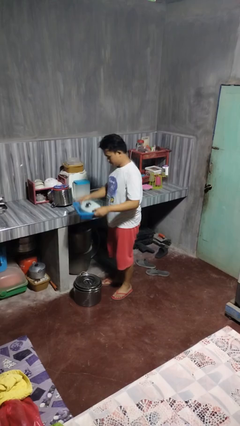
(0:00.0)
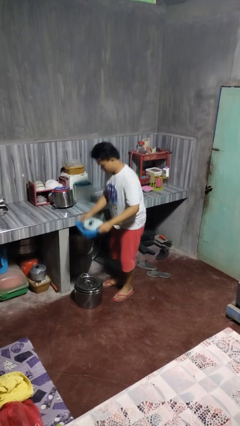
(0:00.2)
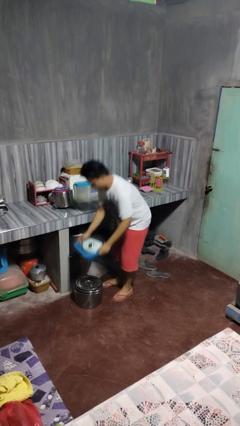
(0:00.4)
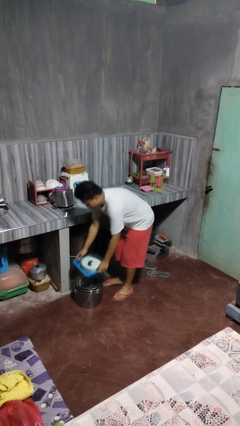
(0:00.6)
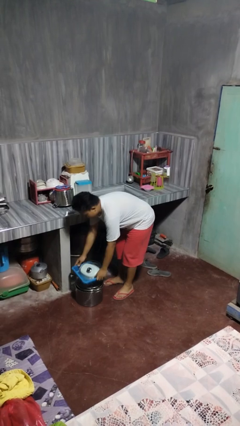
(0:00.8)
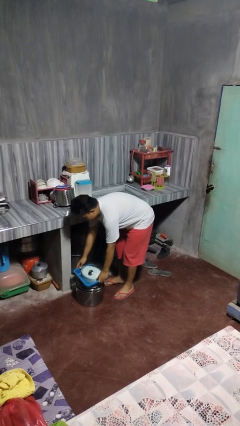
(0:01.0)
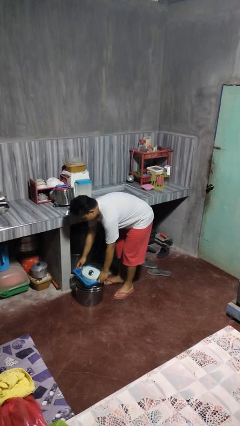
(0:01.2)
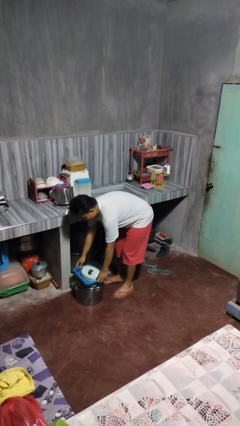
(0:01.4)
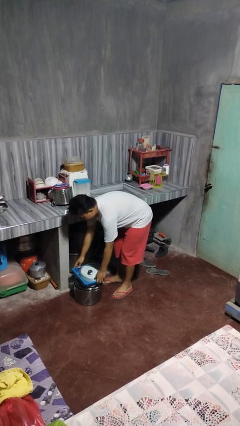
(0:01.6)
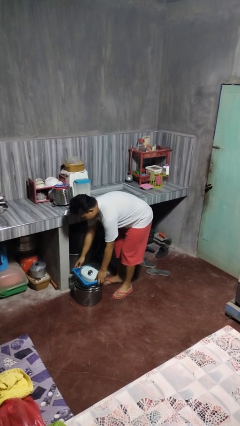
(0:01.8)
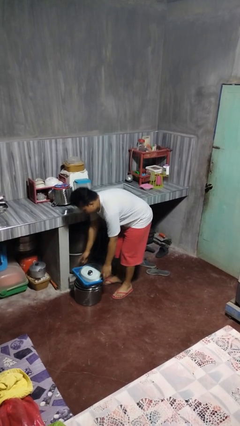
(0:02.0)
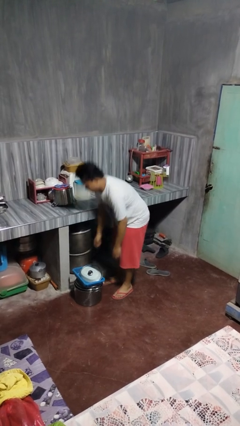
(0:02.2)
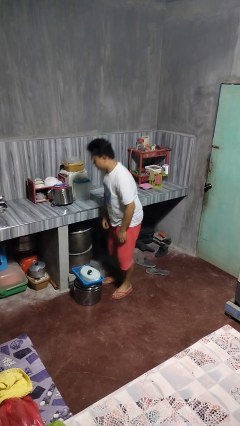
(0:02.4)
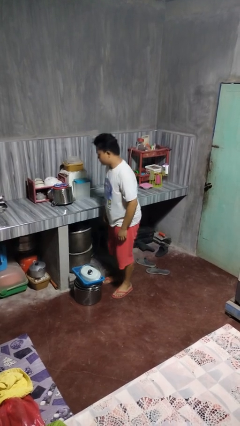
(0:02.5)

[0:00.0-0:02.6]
person puts down object on countertop

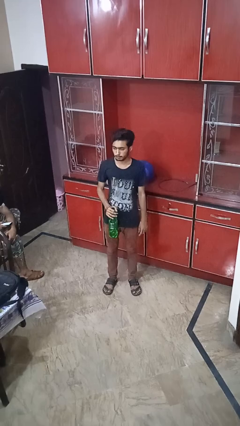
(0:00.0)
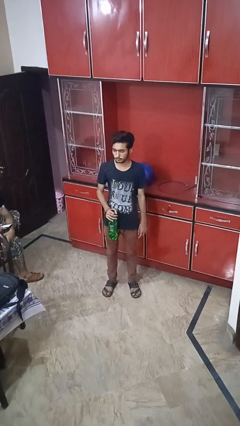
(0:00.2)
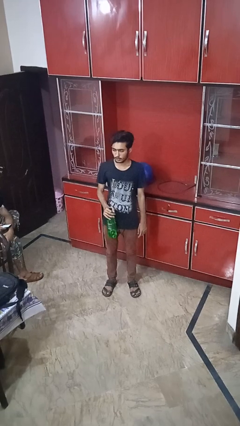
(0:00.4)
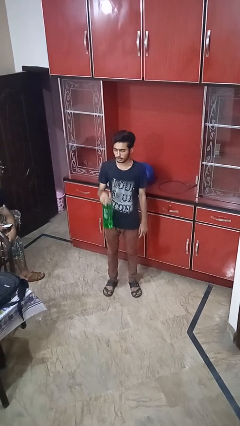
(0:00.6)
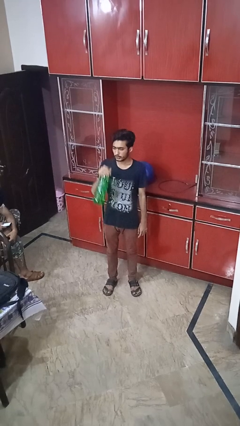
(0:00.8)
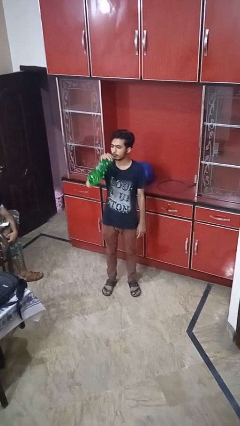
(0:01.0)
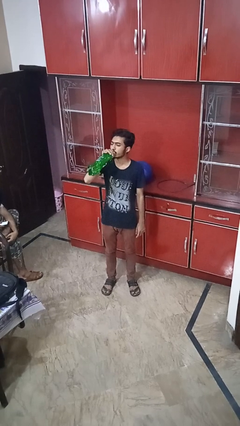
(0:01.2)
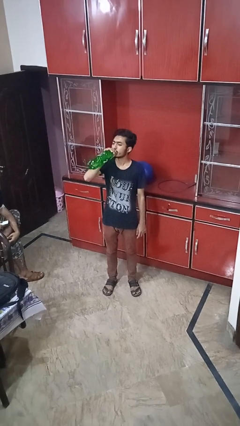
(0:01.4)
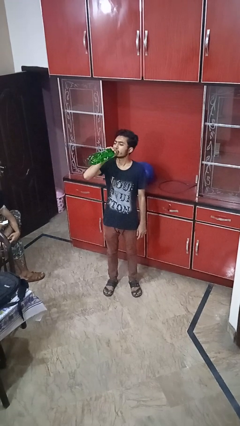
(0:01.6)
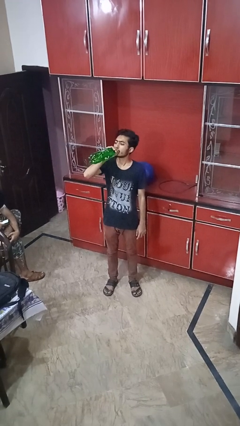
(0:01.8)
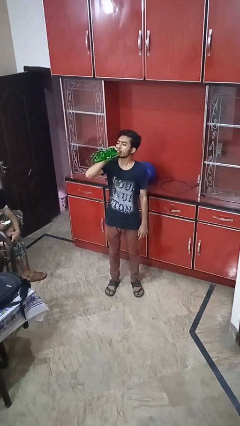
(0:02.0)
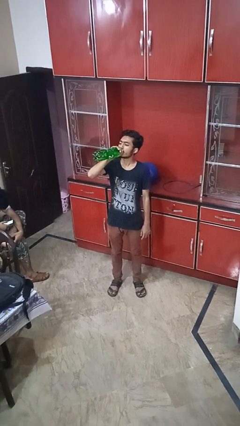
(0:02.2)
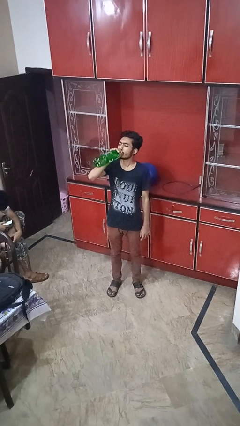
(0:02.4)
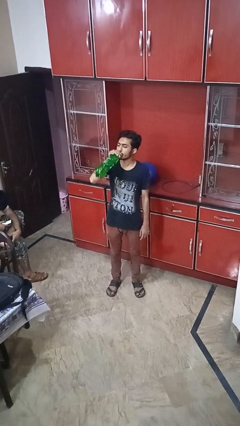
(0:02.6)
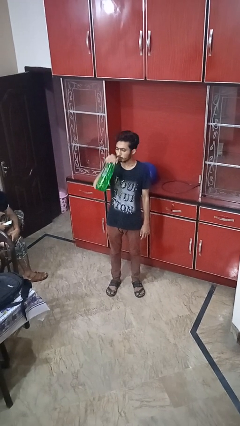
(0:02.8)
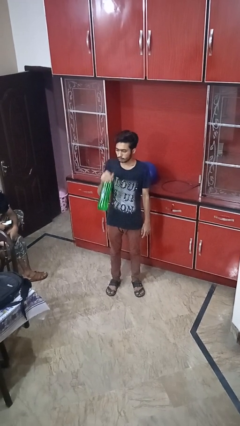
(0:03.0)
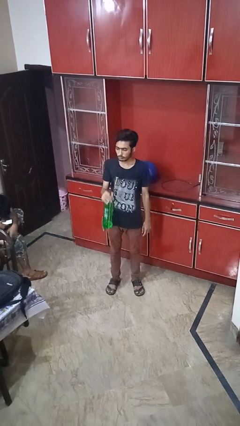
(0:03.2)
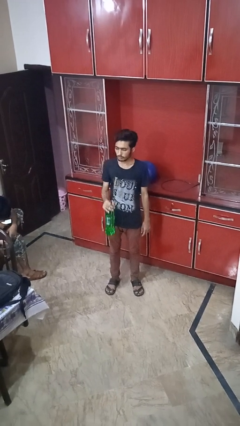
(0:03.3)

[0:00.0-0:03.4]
person drinks from bottle

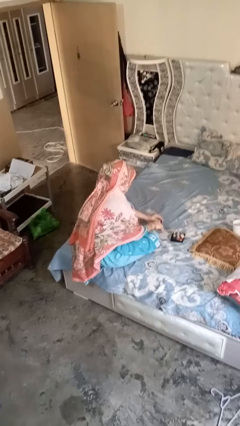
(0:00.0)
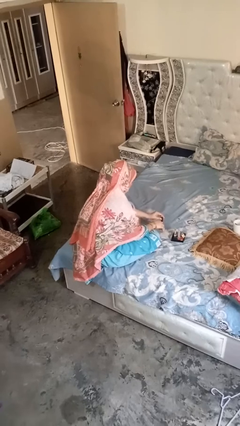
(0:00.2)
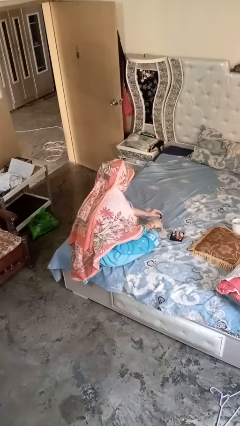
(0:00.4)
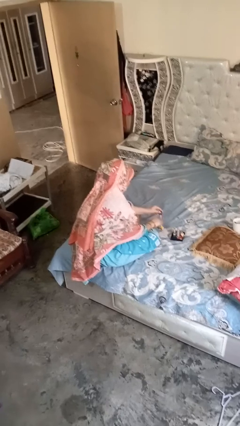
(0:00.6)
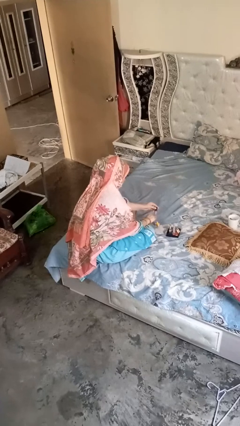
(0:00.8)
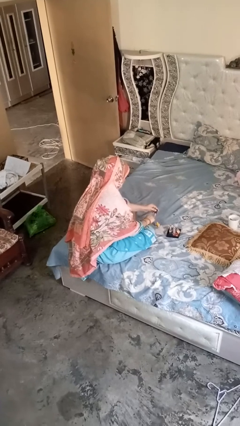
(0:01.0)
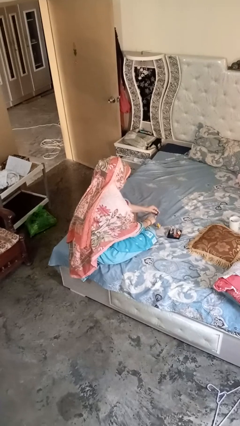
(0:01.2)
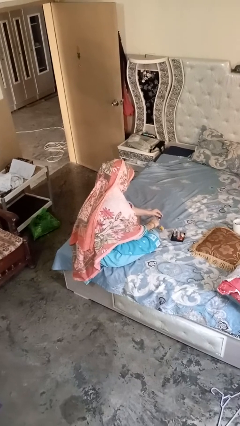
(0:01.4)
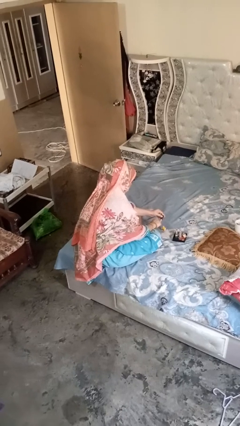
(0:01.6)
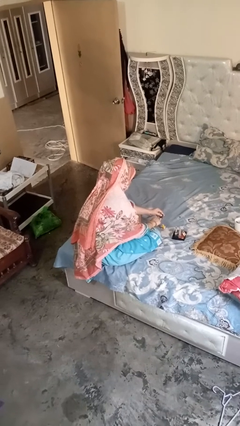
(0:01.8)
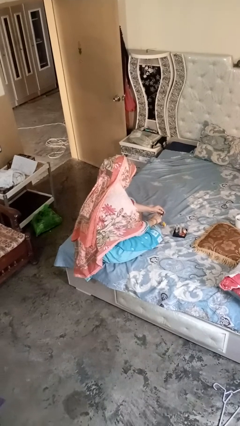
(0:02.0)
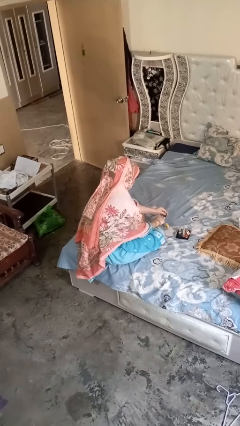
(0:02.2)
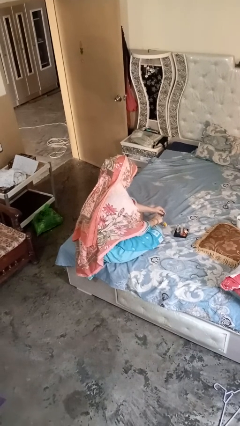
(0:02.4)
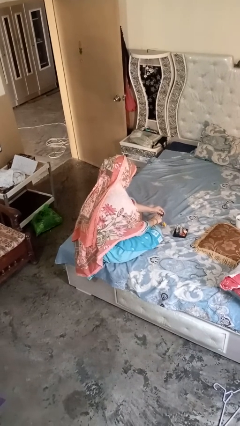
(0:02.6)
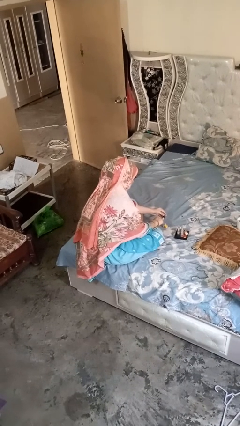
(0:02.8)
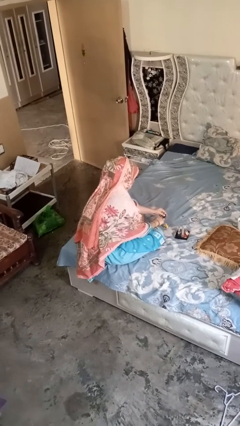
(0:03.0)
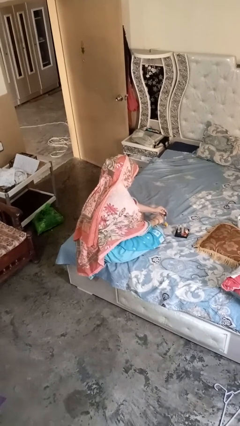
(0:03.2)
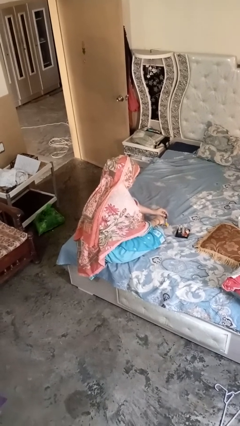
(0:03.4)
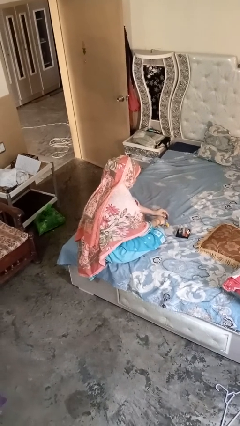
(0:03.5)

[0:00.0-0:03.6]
person paints fingernails

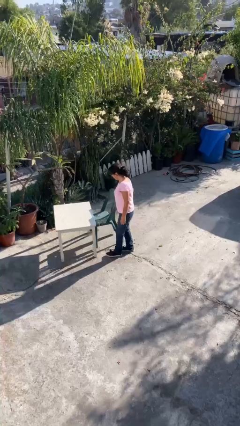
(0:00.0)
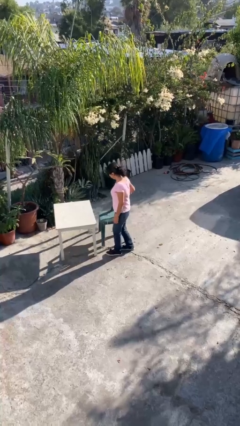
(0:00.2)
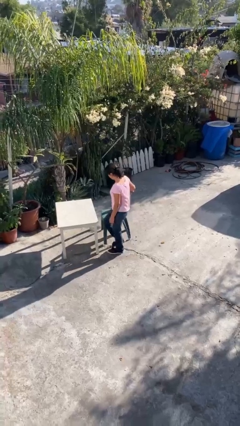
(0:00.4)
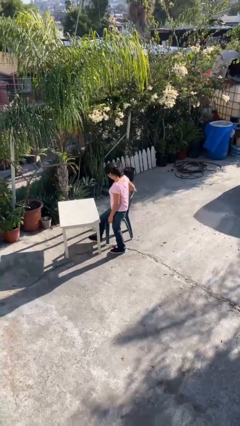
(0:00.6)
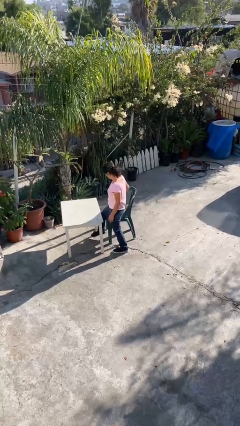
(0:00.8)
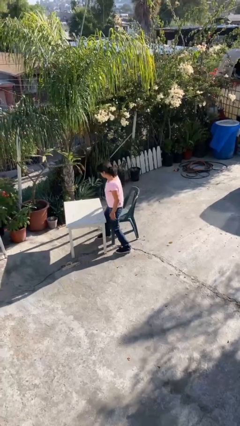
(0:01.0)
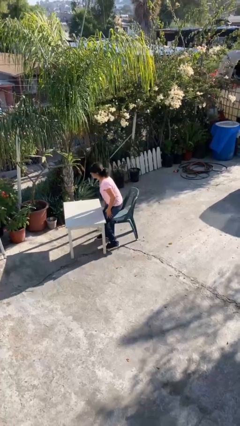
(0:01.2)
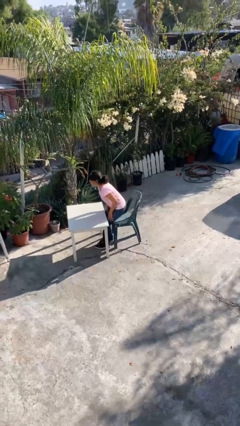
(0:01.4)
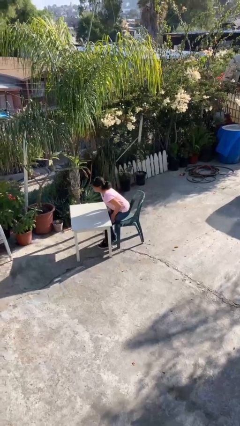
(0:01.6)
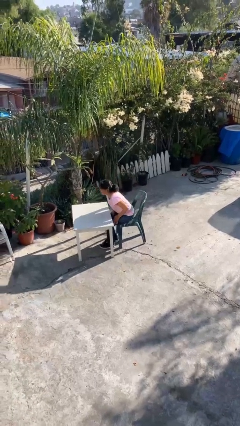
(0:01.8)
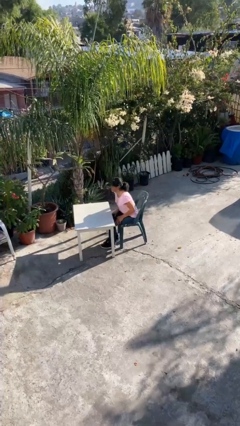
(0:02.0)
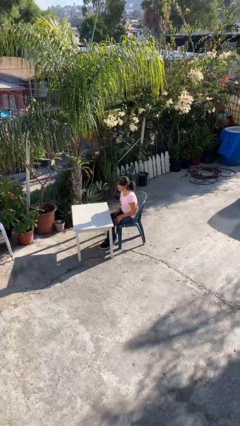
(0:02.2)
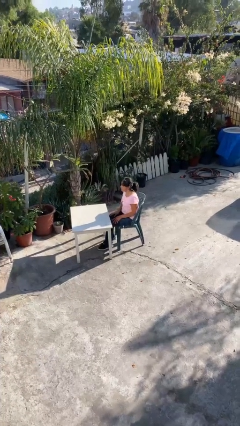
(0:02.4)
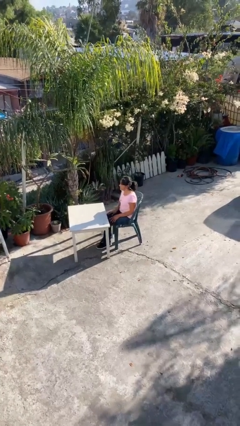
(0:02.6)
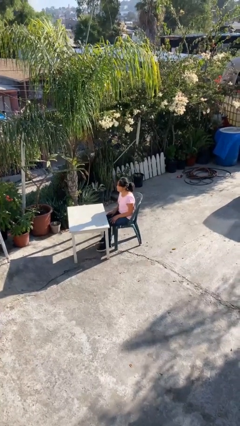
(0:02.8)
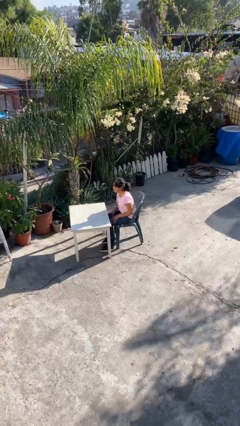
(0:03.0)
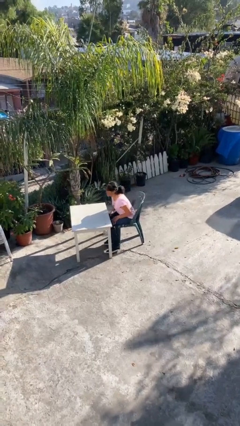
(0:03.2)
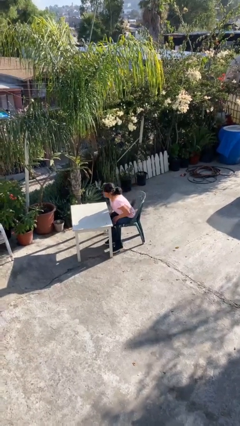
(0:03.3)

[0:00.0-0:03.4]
person sits down

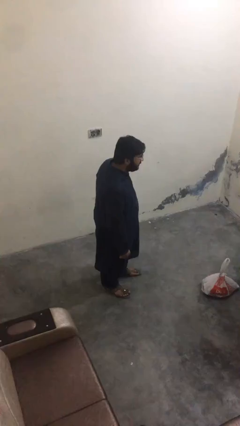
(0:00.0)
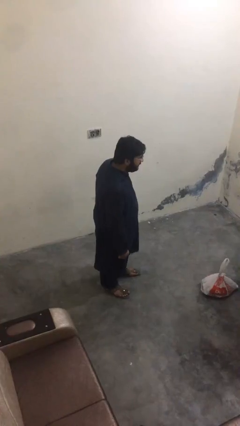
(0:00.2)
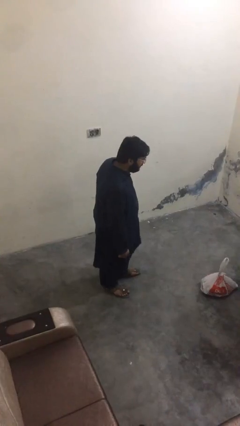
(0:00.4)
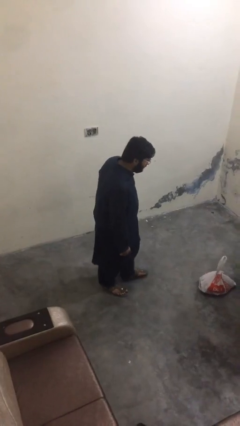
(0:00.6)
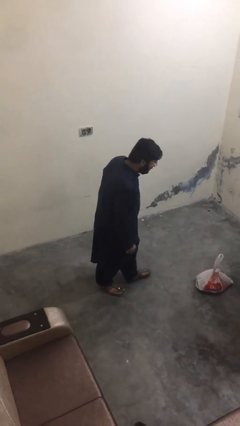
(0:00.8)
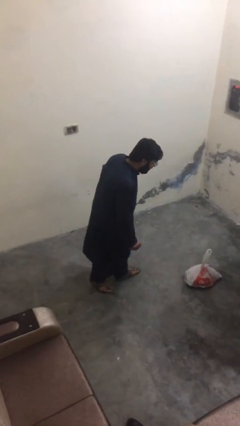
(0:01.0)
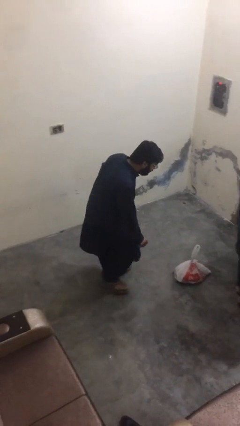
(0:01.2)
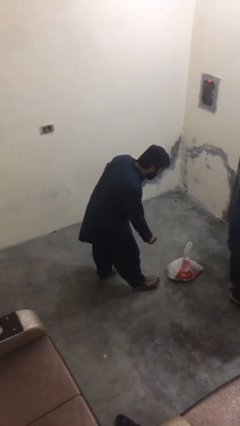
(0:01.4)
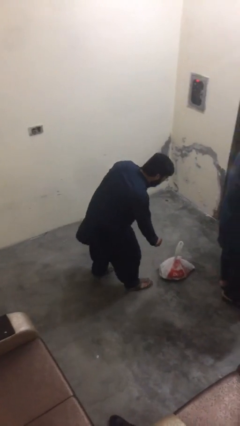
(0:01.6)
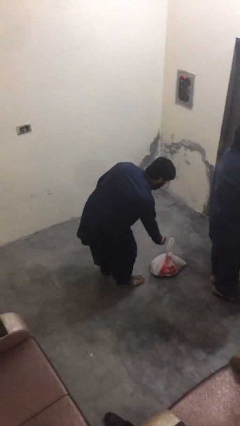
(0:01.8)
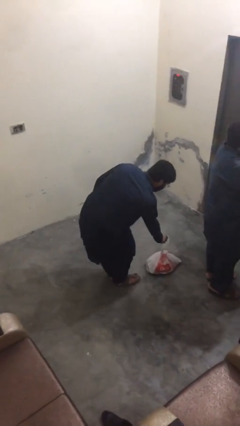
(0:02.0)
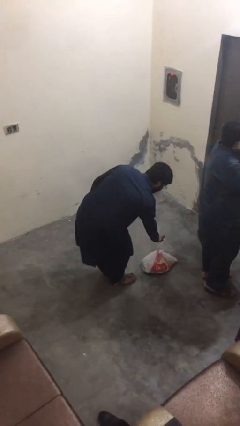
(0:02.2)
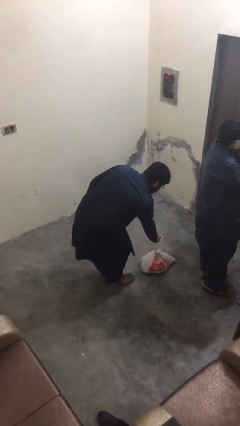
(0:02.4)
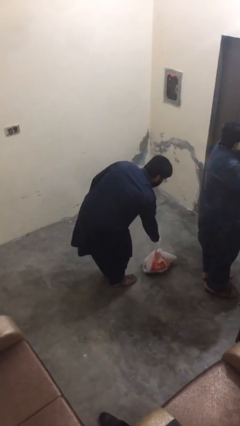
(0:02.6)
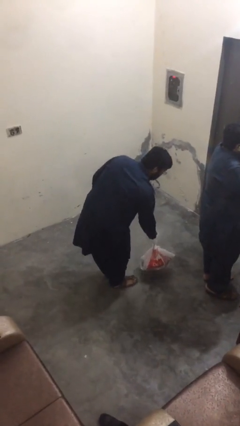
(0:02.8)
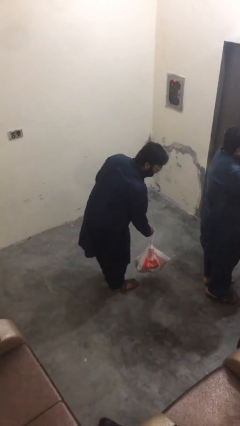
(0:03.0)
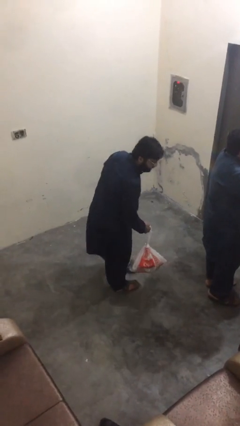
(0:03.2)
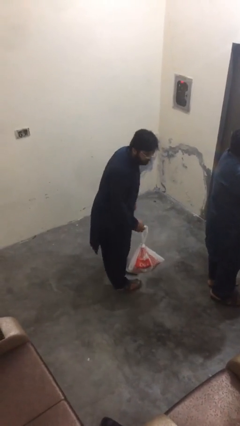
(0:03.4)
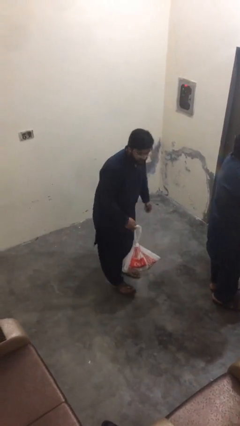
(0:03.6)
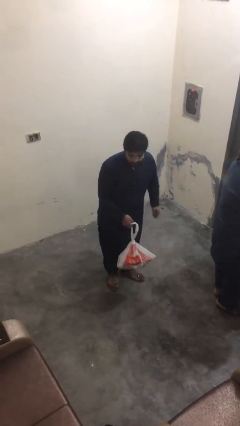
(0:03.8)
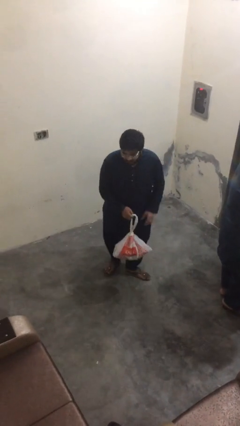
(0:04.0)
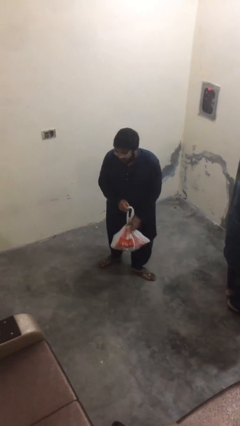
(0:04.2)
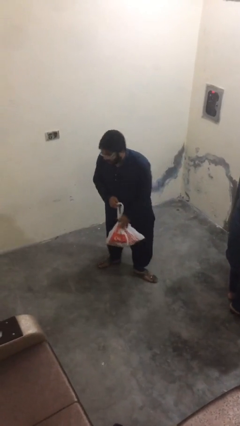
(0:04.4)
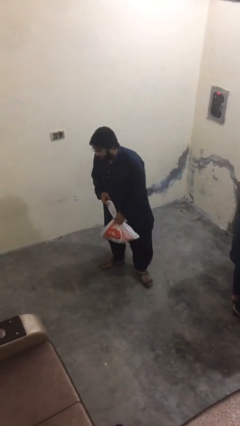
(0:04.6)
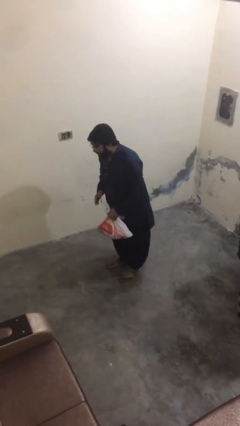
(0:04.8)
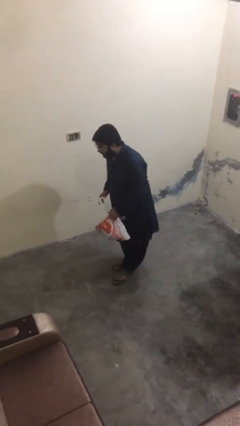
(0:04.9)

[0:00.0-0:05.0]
person steals object from person
